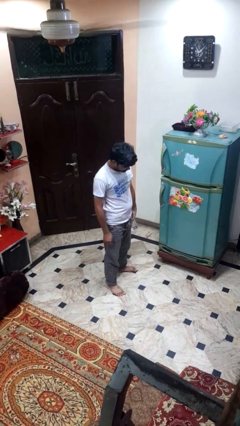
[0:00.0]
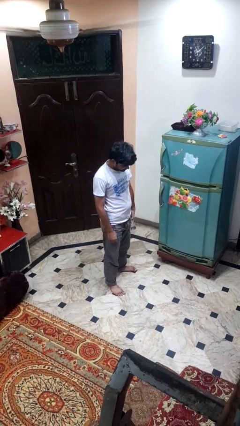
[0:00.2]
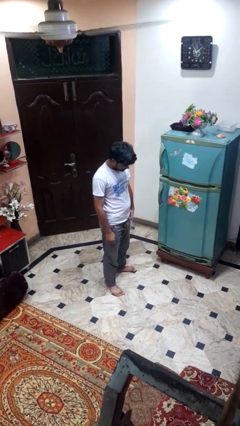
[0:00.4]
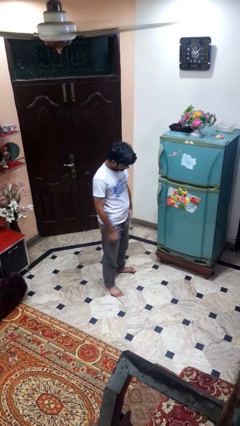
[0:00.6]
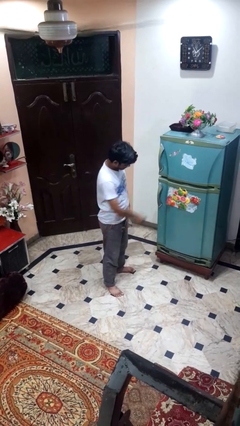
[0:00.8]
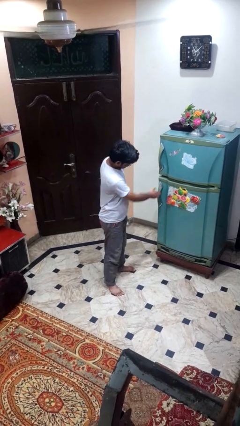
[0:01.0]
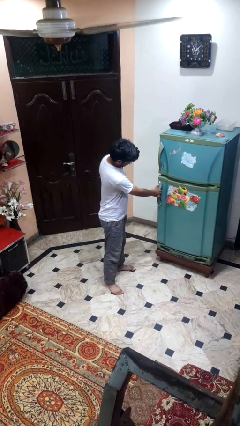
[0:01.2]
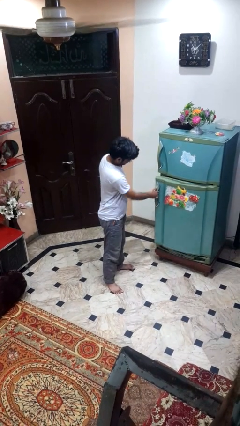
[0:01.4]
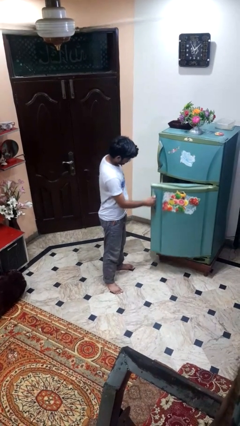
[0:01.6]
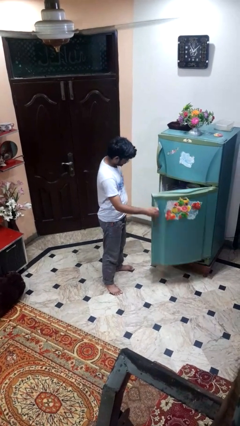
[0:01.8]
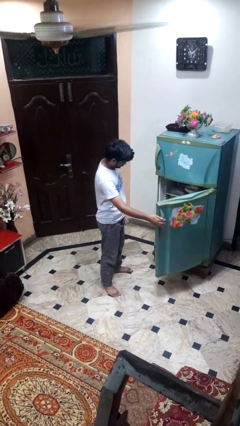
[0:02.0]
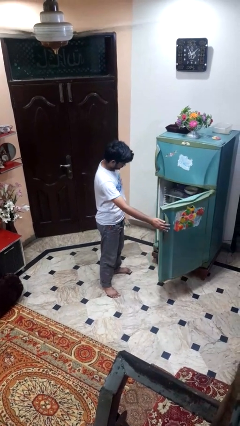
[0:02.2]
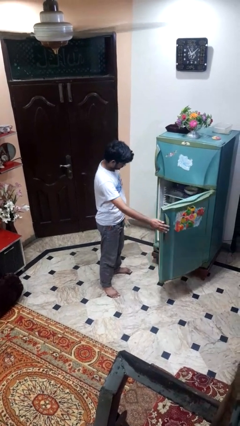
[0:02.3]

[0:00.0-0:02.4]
person opens refrigerator

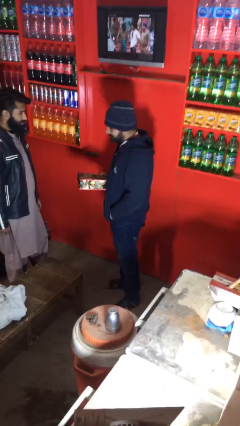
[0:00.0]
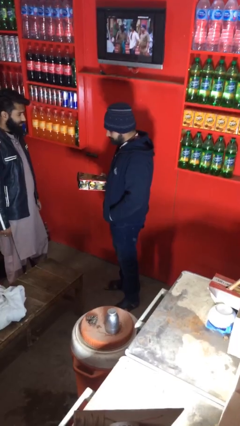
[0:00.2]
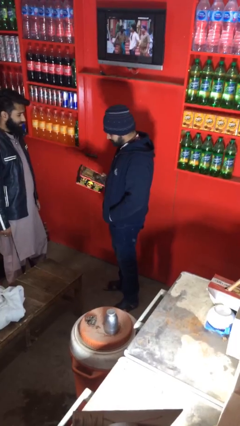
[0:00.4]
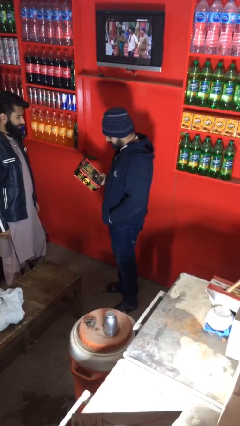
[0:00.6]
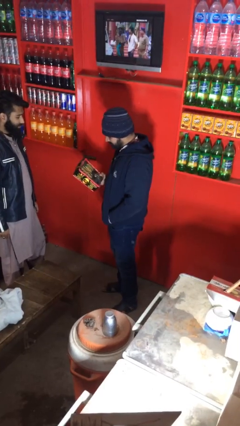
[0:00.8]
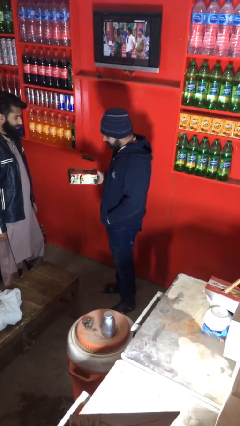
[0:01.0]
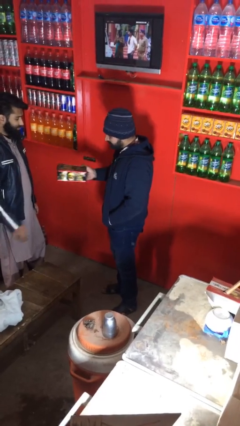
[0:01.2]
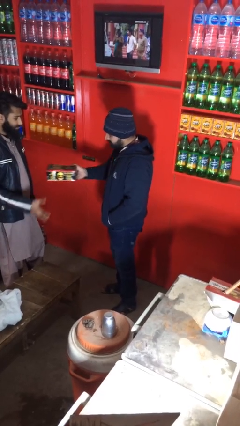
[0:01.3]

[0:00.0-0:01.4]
person transfers object to person

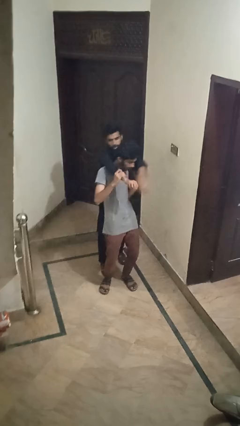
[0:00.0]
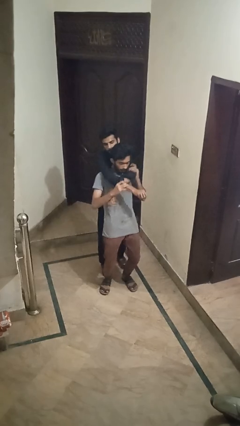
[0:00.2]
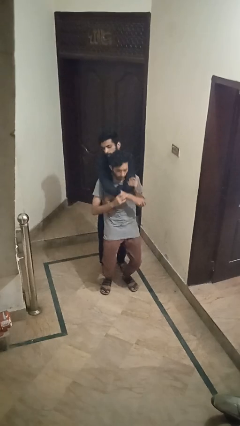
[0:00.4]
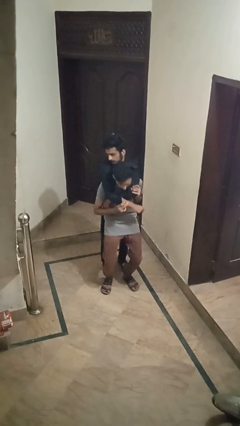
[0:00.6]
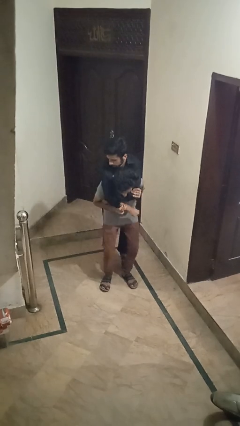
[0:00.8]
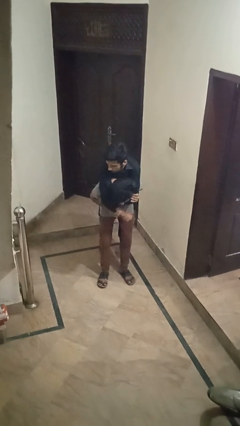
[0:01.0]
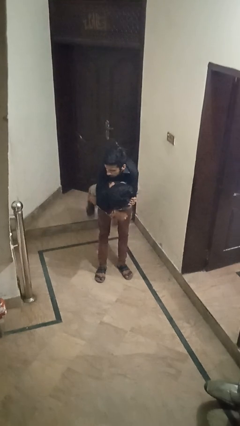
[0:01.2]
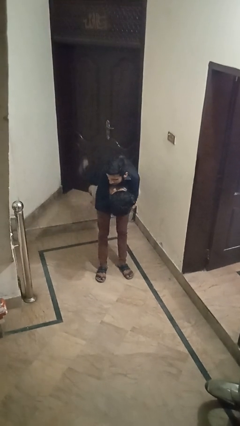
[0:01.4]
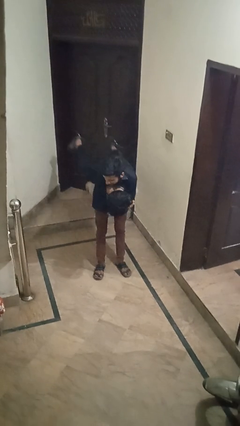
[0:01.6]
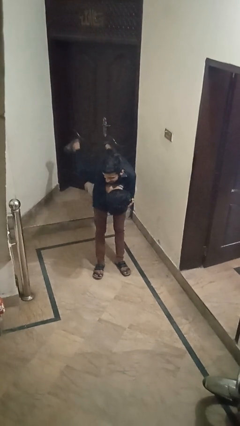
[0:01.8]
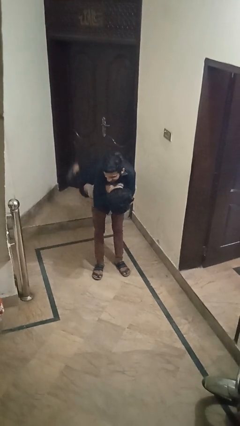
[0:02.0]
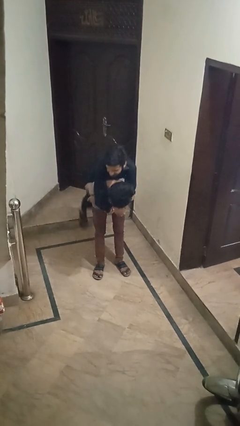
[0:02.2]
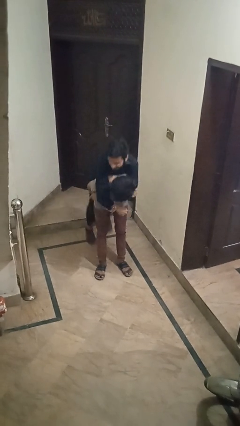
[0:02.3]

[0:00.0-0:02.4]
person carries person over shoulder

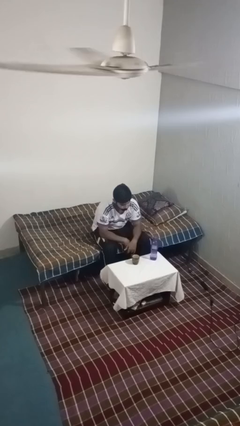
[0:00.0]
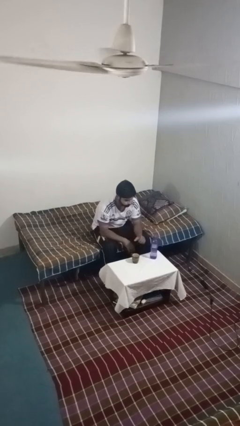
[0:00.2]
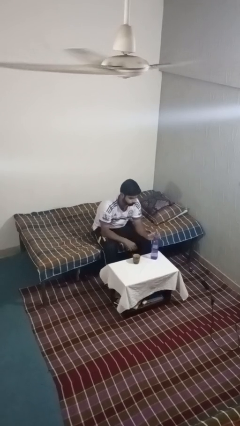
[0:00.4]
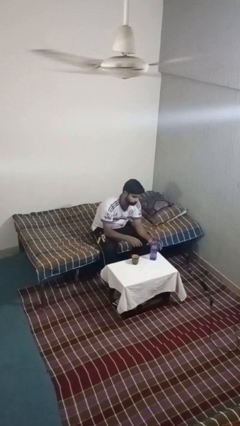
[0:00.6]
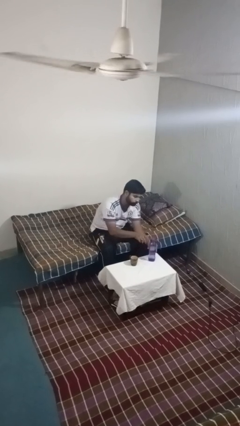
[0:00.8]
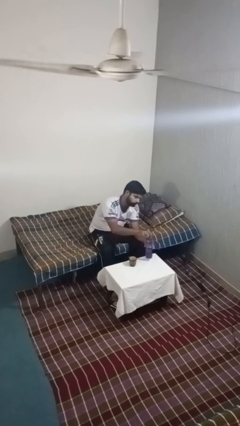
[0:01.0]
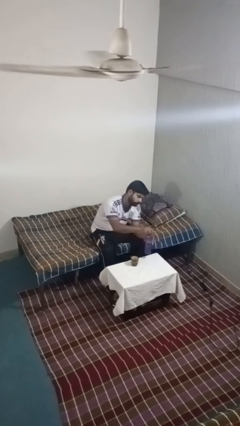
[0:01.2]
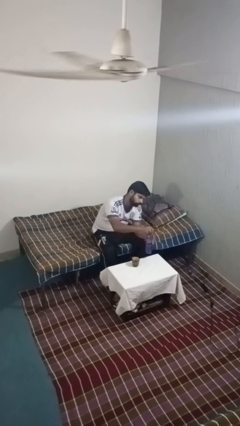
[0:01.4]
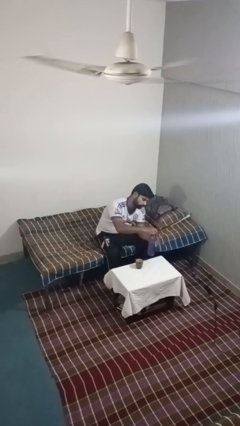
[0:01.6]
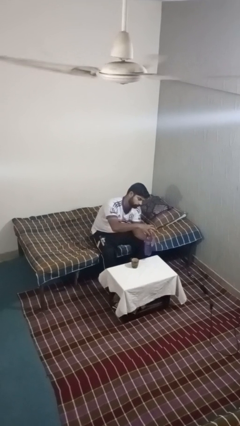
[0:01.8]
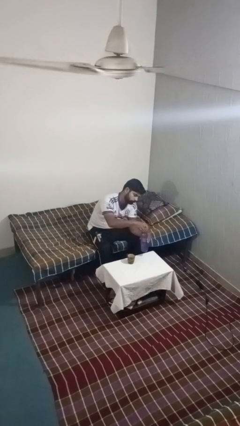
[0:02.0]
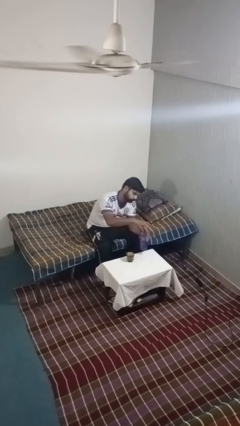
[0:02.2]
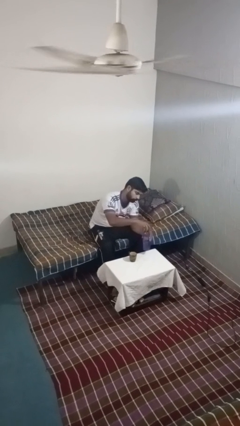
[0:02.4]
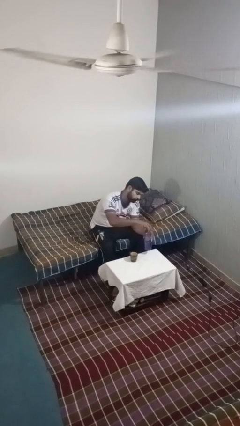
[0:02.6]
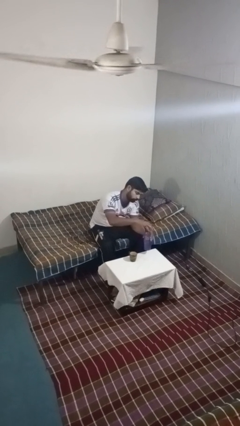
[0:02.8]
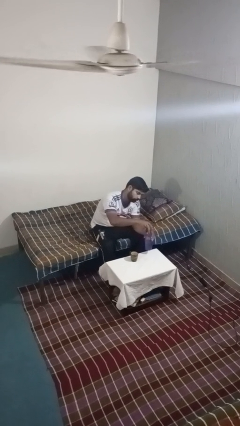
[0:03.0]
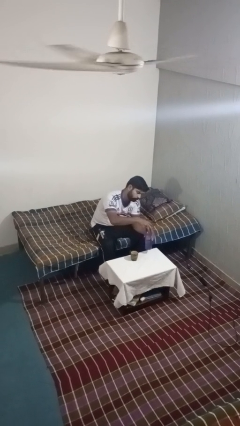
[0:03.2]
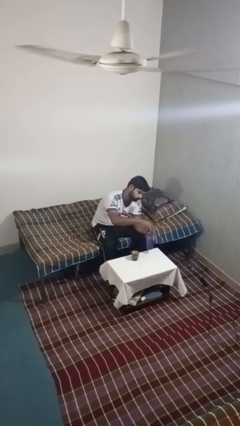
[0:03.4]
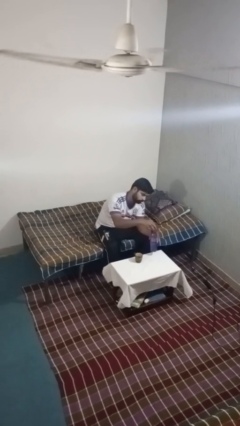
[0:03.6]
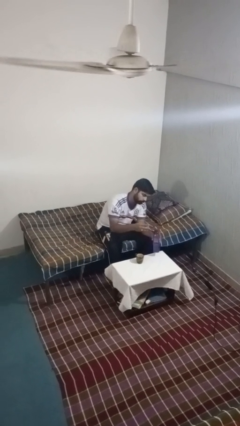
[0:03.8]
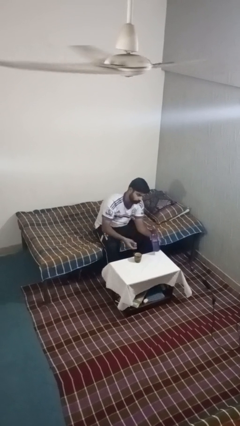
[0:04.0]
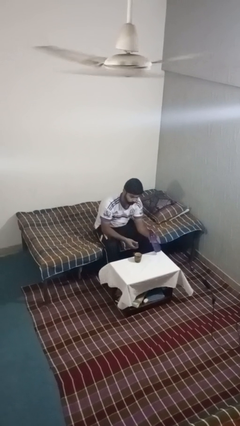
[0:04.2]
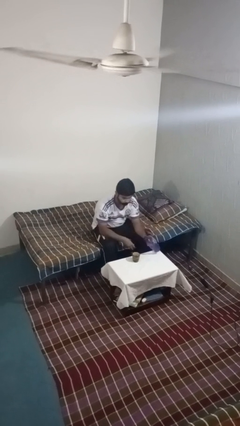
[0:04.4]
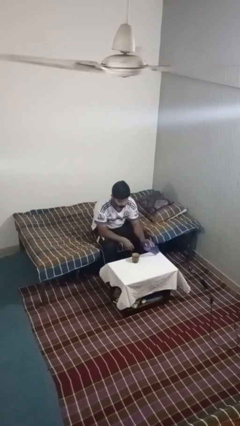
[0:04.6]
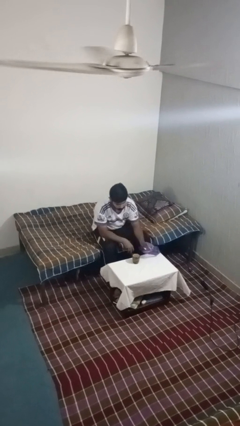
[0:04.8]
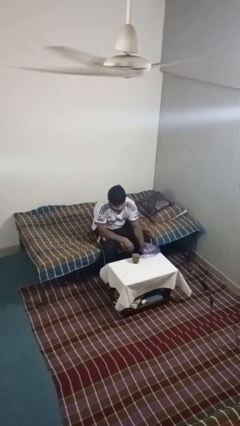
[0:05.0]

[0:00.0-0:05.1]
person unscrews lid from bottle

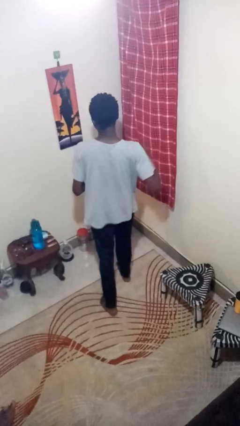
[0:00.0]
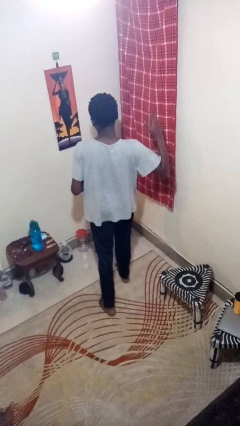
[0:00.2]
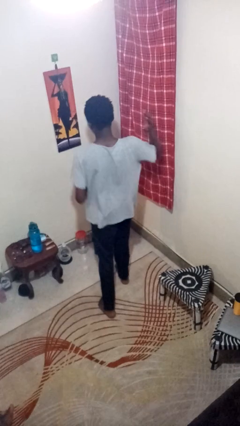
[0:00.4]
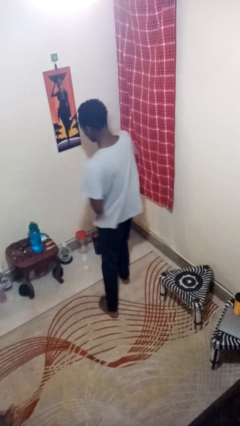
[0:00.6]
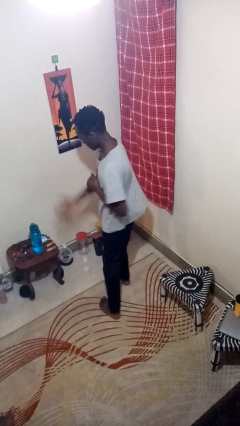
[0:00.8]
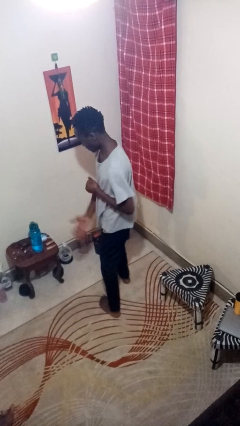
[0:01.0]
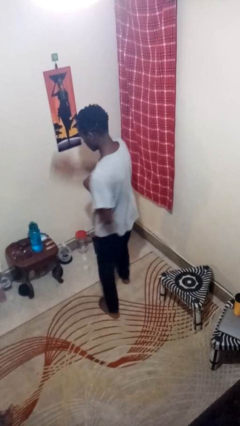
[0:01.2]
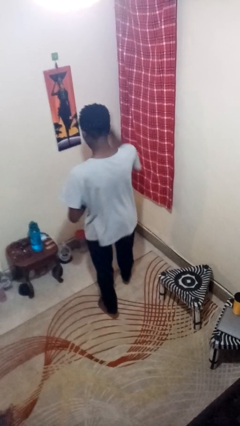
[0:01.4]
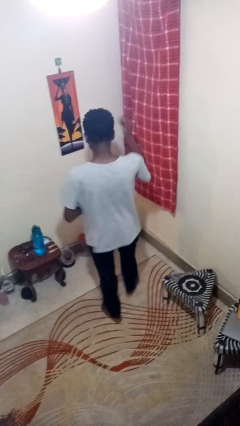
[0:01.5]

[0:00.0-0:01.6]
person karate chop

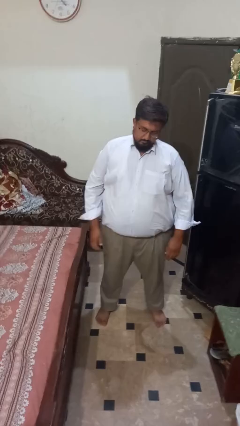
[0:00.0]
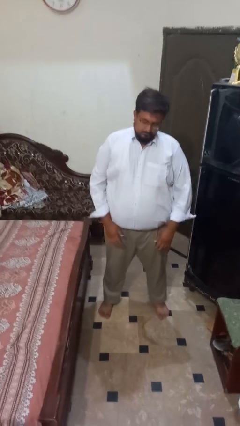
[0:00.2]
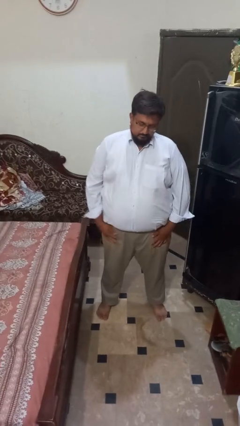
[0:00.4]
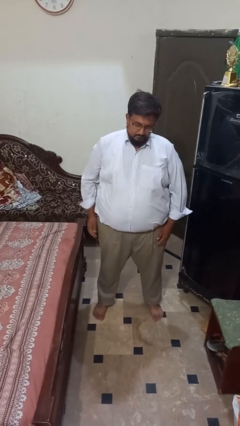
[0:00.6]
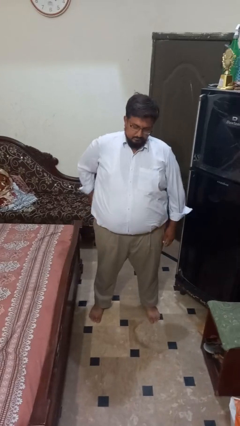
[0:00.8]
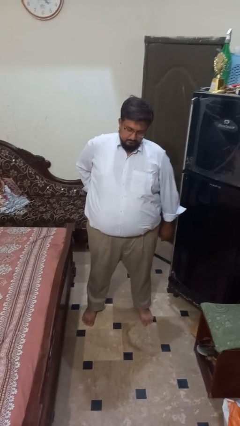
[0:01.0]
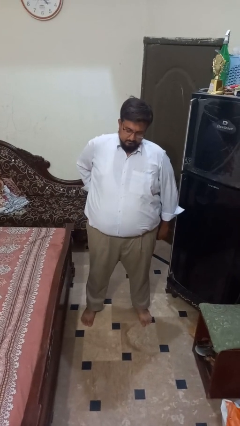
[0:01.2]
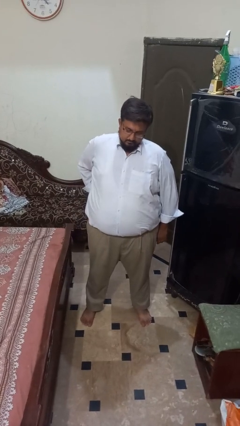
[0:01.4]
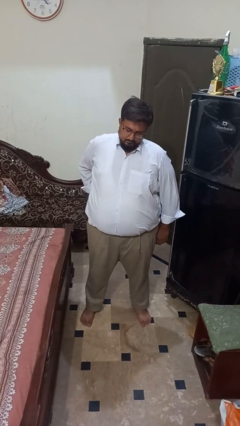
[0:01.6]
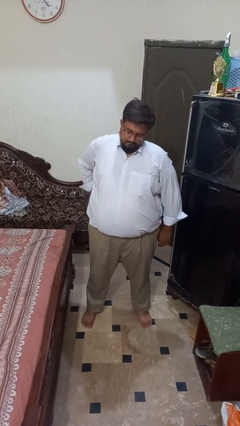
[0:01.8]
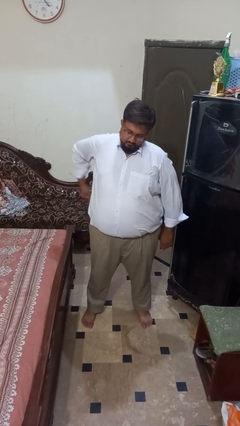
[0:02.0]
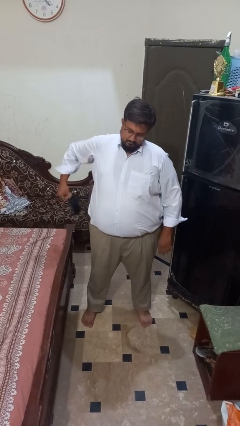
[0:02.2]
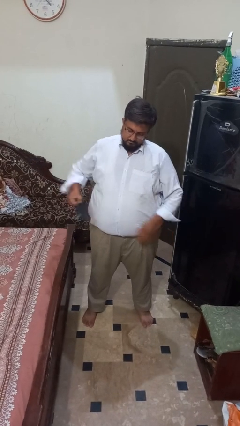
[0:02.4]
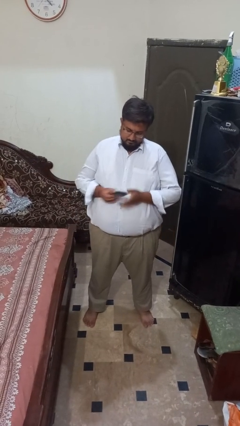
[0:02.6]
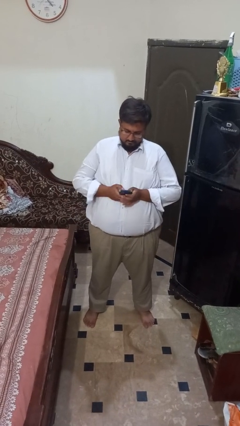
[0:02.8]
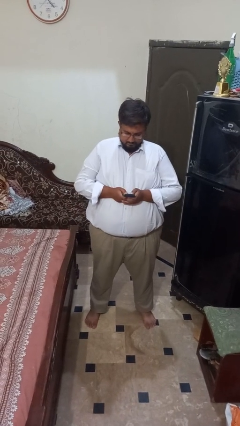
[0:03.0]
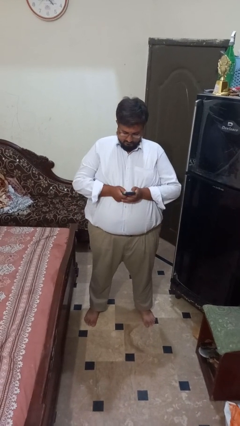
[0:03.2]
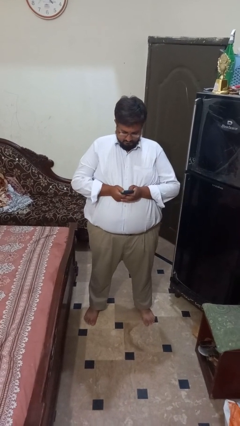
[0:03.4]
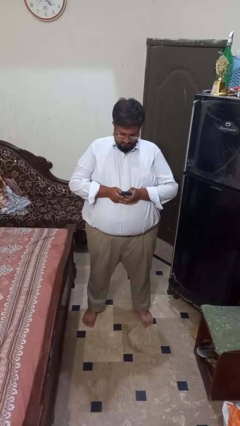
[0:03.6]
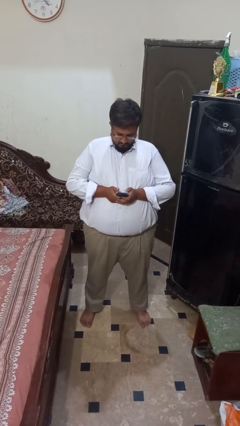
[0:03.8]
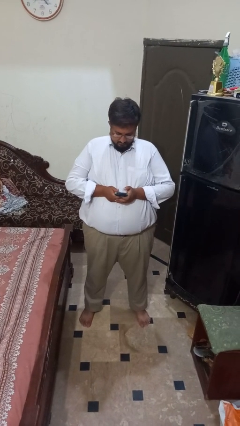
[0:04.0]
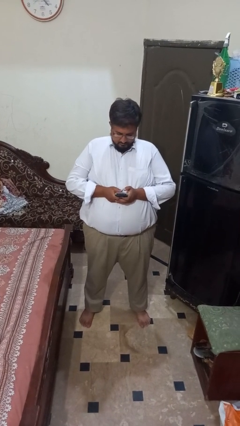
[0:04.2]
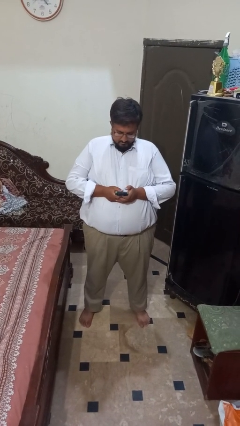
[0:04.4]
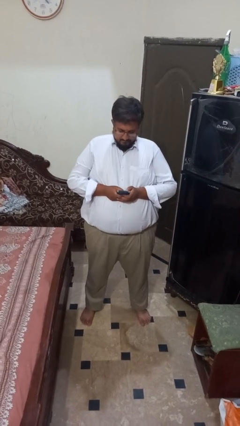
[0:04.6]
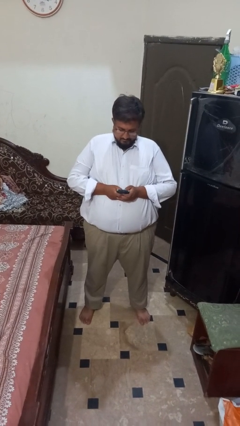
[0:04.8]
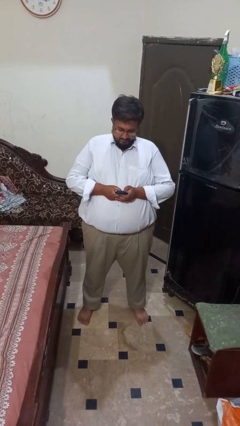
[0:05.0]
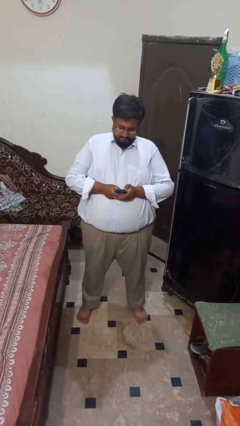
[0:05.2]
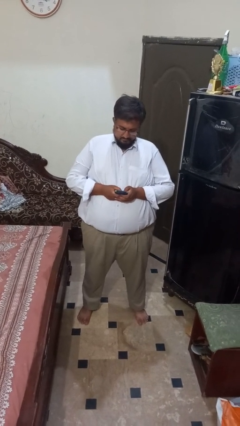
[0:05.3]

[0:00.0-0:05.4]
person takes phone from pocket
